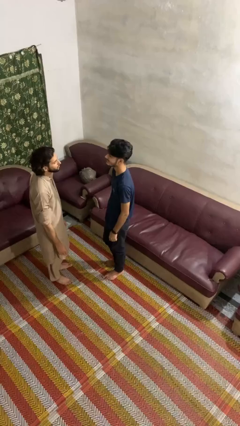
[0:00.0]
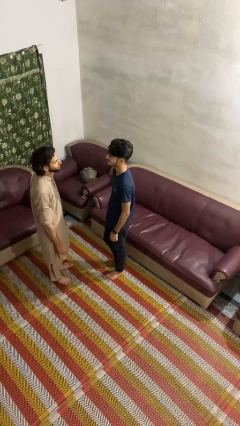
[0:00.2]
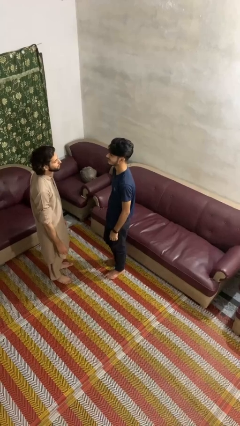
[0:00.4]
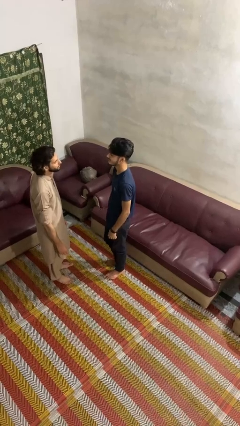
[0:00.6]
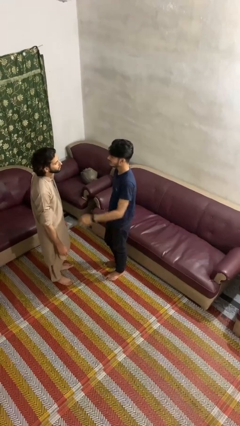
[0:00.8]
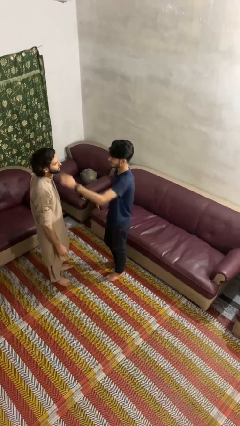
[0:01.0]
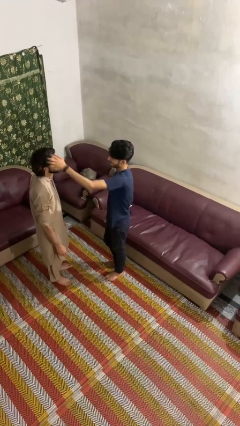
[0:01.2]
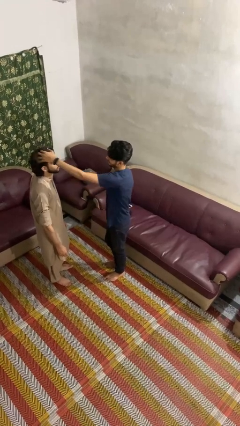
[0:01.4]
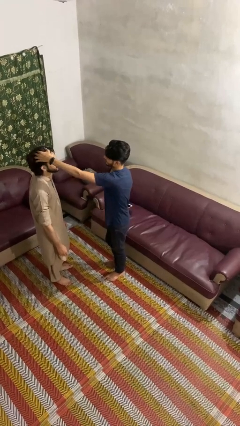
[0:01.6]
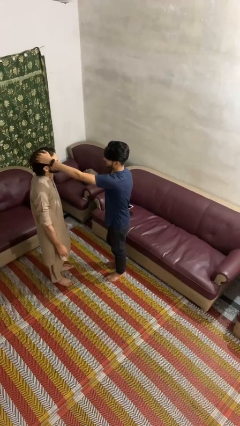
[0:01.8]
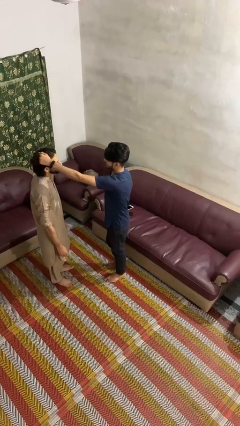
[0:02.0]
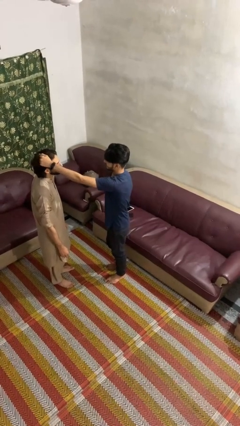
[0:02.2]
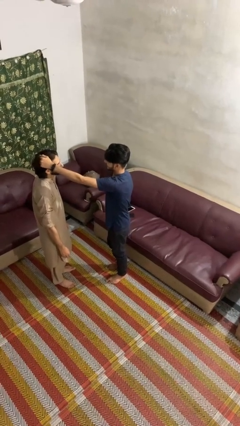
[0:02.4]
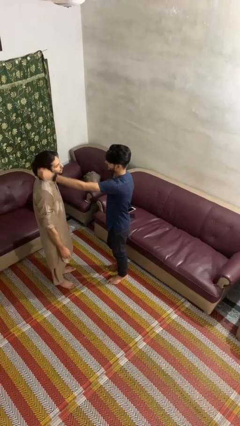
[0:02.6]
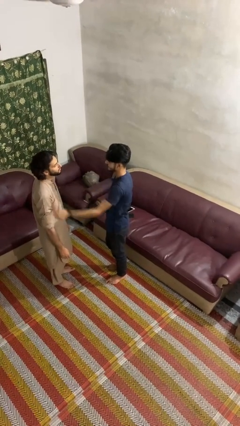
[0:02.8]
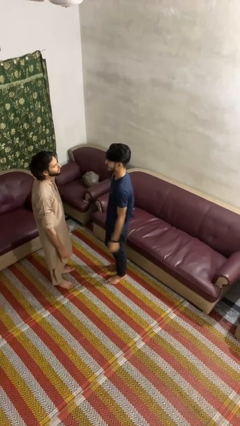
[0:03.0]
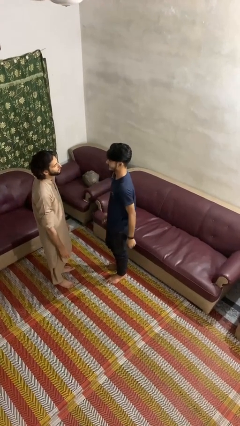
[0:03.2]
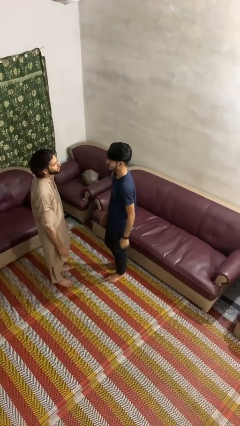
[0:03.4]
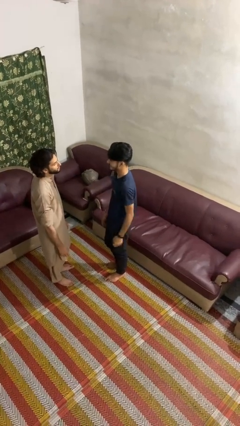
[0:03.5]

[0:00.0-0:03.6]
person grabs person by hair

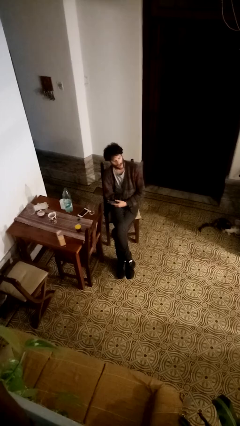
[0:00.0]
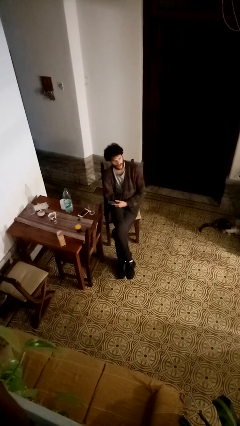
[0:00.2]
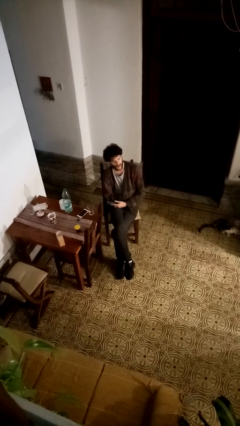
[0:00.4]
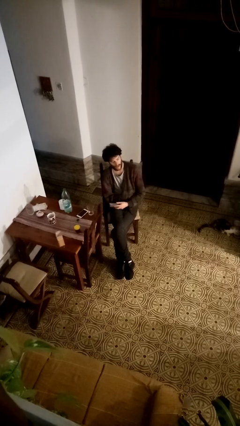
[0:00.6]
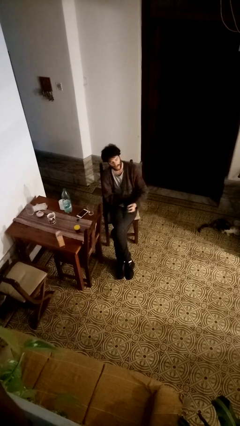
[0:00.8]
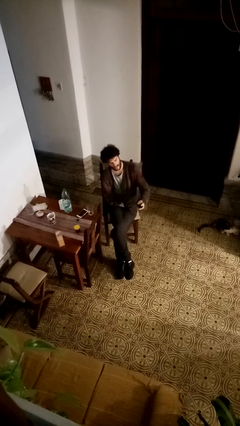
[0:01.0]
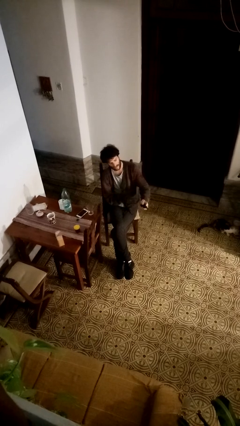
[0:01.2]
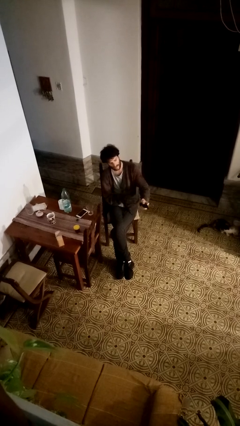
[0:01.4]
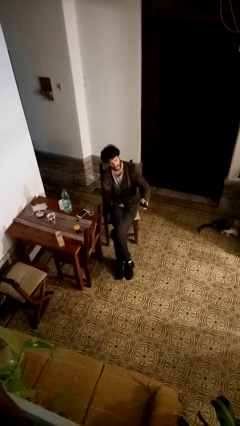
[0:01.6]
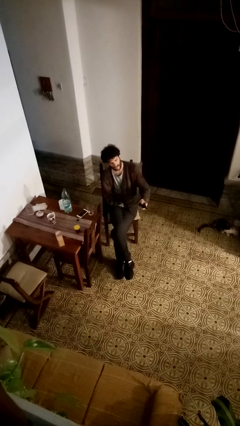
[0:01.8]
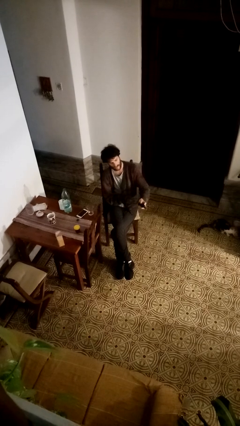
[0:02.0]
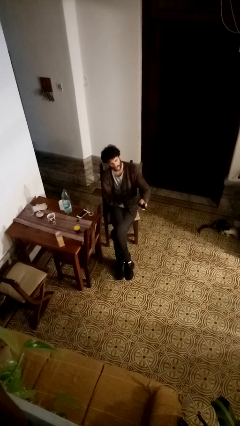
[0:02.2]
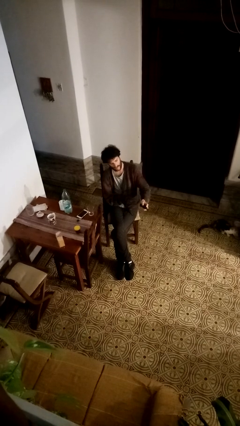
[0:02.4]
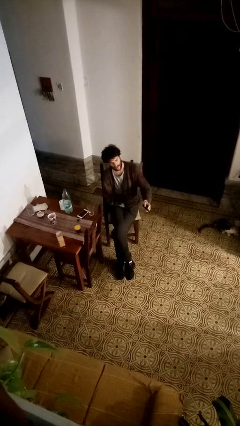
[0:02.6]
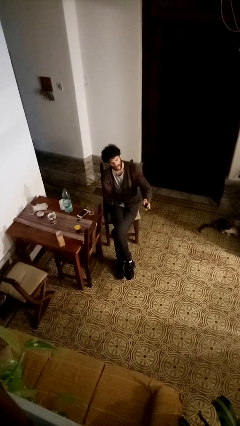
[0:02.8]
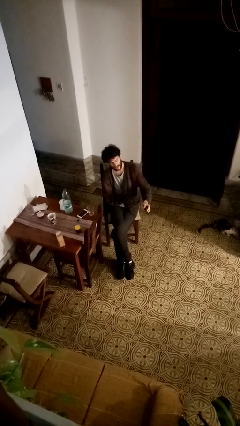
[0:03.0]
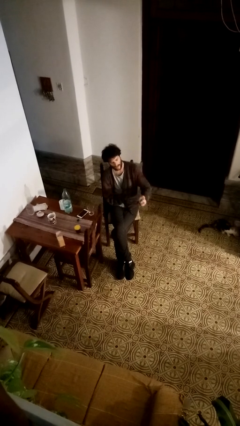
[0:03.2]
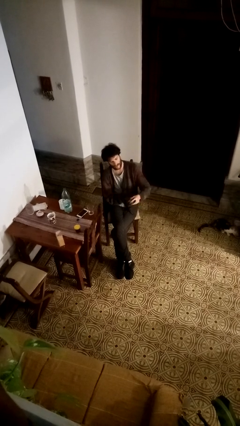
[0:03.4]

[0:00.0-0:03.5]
person uses television remote

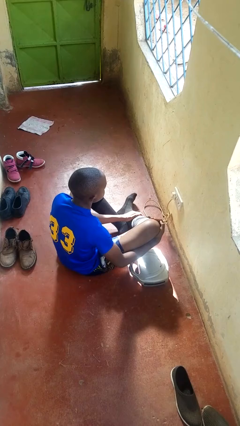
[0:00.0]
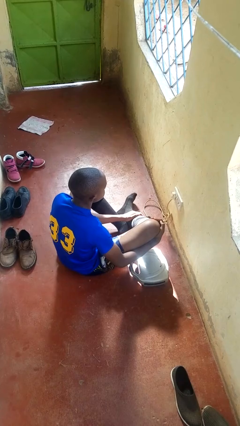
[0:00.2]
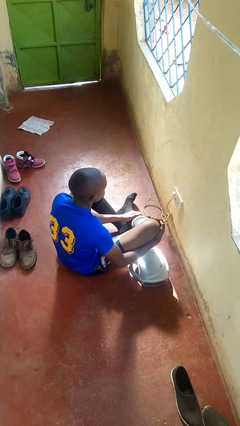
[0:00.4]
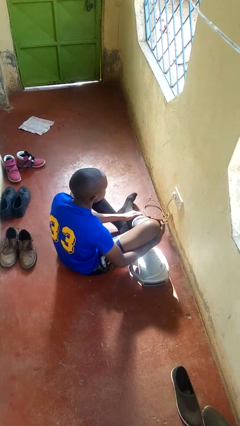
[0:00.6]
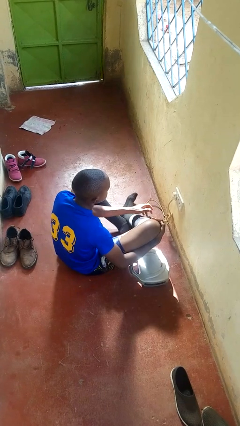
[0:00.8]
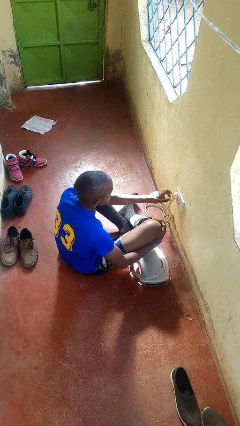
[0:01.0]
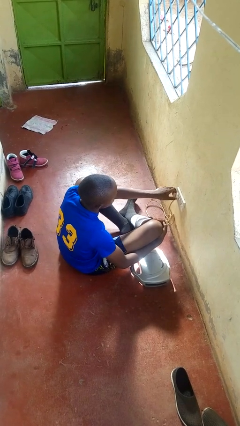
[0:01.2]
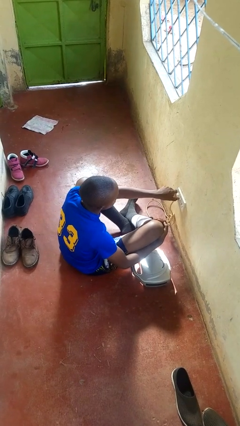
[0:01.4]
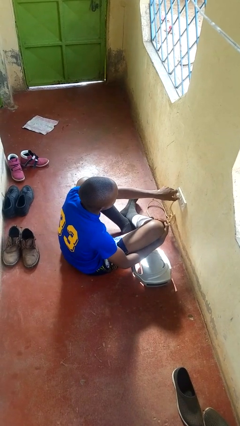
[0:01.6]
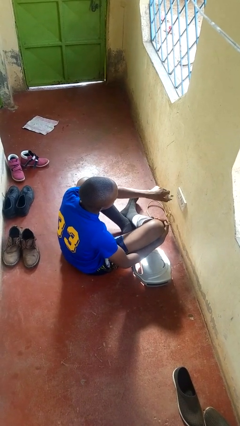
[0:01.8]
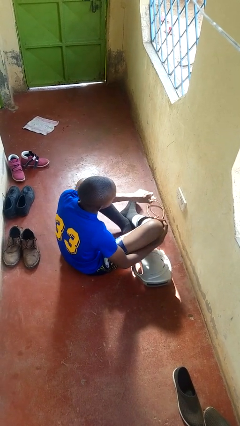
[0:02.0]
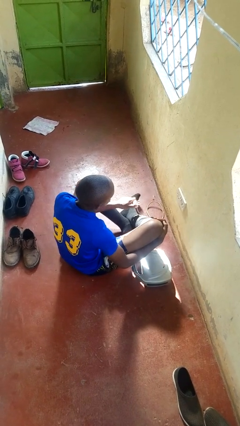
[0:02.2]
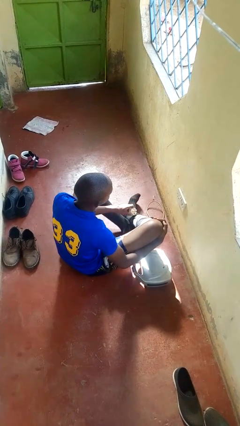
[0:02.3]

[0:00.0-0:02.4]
person unplugs from electrical socket

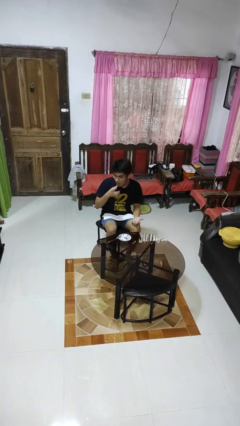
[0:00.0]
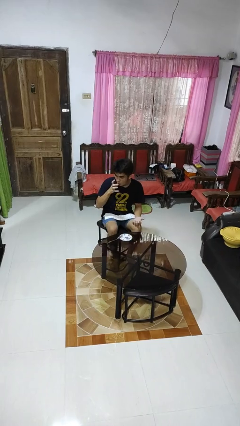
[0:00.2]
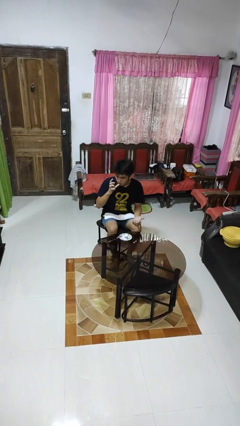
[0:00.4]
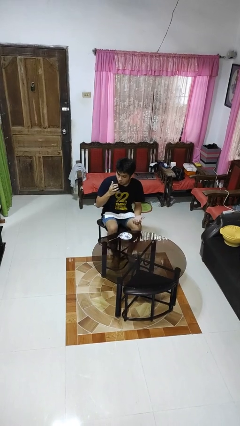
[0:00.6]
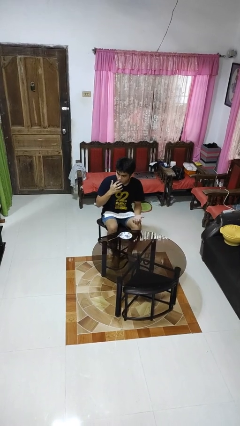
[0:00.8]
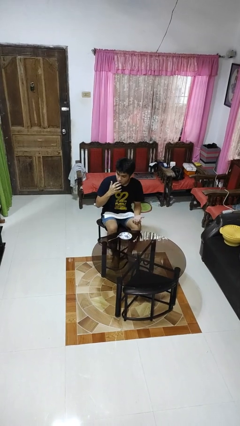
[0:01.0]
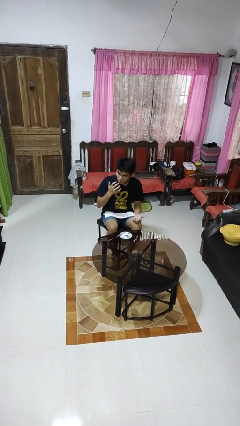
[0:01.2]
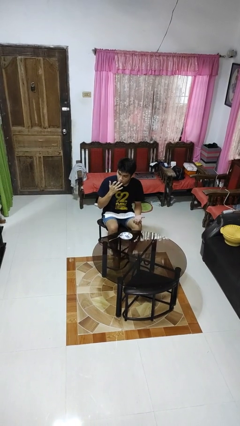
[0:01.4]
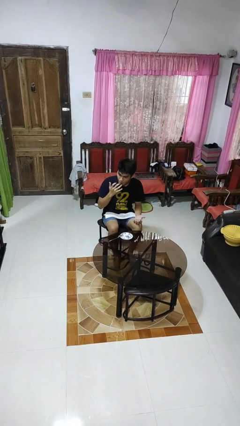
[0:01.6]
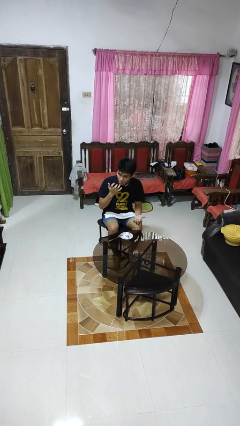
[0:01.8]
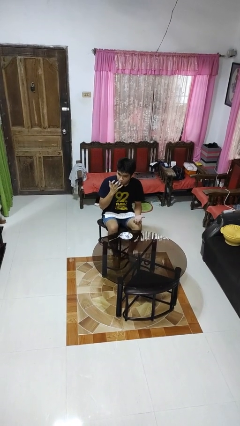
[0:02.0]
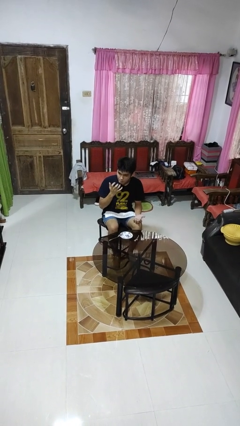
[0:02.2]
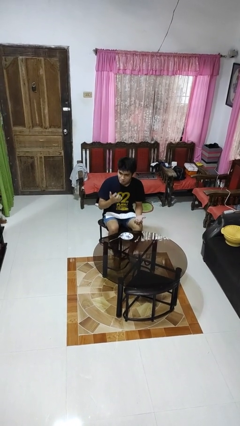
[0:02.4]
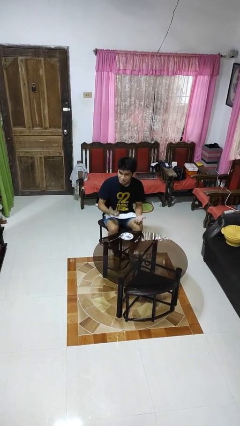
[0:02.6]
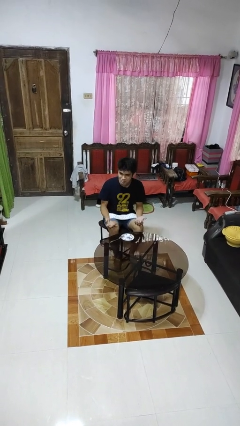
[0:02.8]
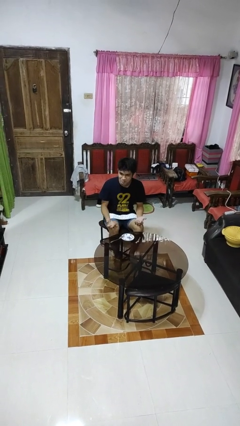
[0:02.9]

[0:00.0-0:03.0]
person licks fingers

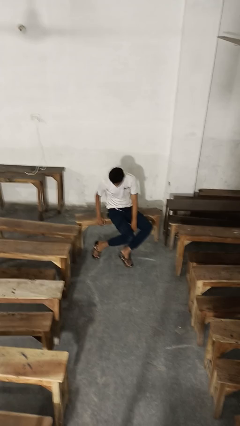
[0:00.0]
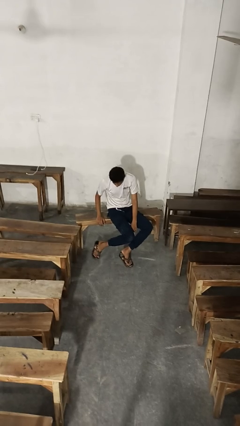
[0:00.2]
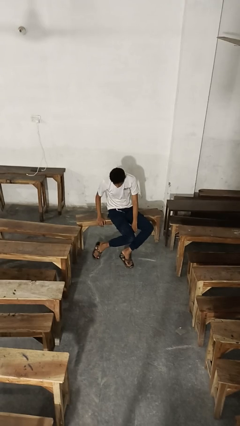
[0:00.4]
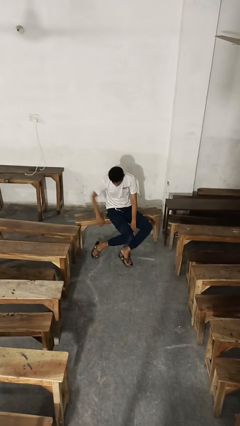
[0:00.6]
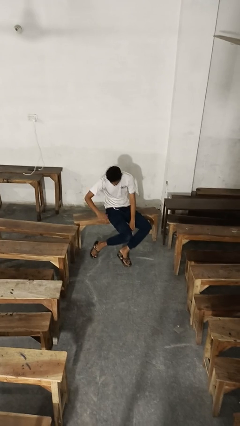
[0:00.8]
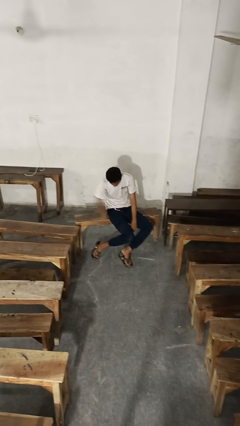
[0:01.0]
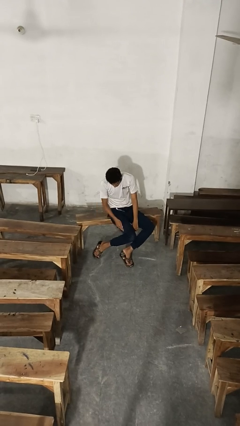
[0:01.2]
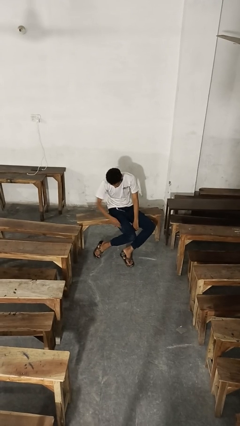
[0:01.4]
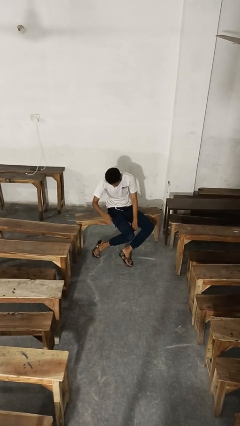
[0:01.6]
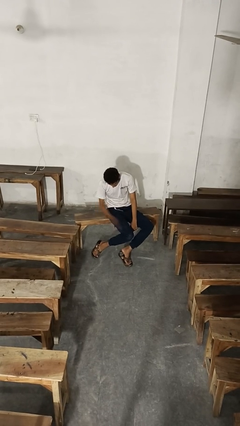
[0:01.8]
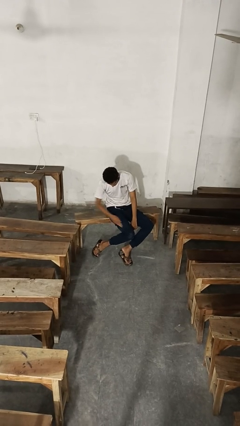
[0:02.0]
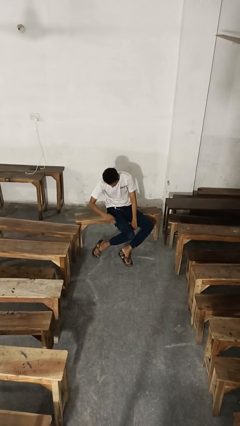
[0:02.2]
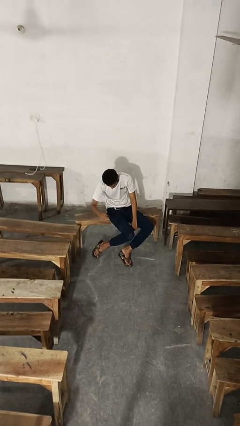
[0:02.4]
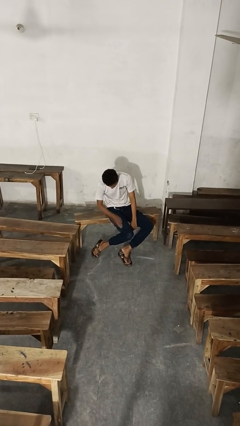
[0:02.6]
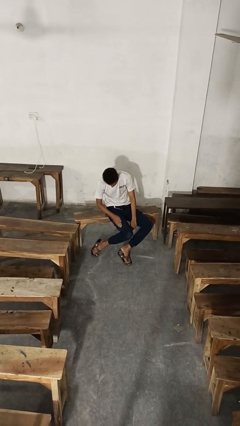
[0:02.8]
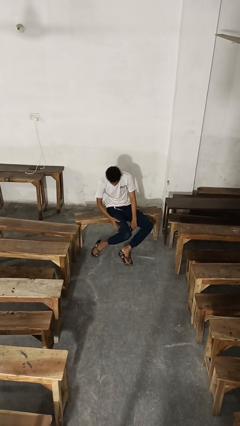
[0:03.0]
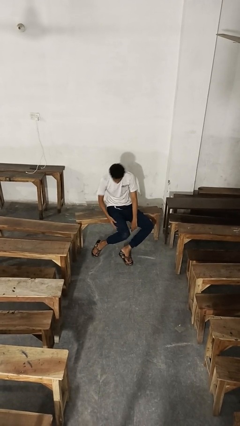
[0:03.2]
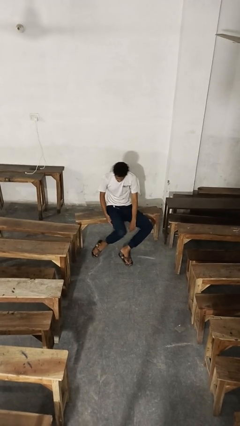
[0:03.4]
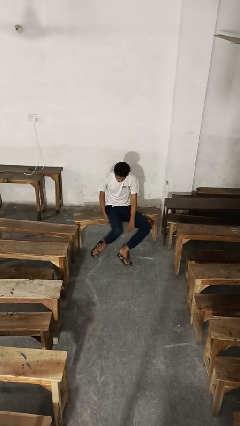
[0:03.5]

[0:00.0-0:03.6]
person slaps hands on thighs

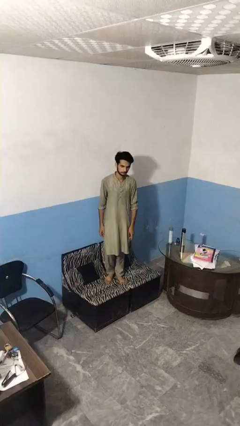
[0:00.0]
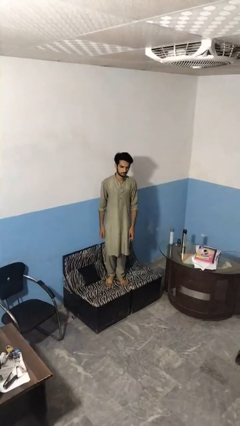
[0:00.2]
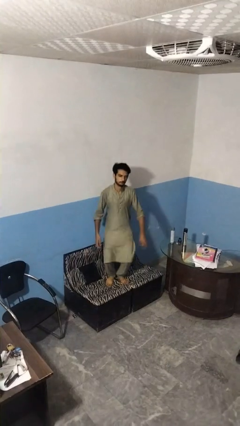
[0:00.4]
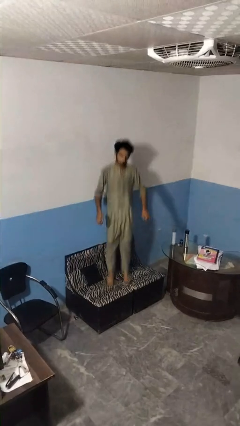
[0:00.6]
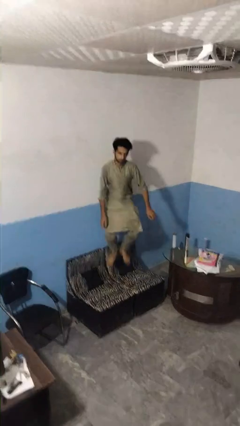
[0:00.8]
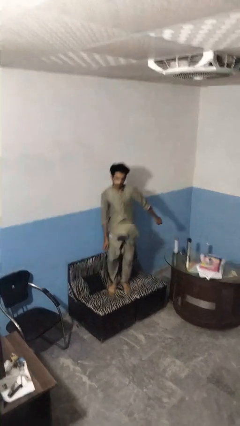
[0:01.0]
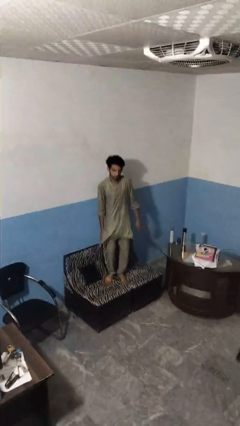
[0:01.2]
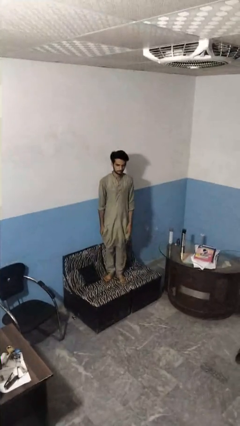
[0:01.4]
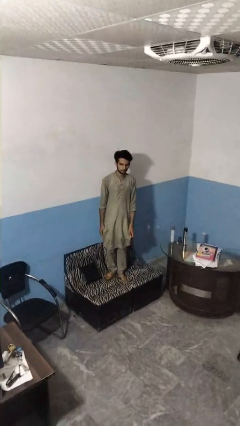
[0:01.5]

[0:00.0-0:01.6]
person jumps on couch

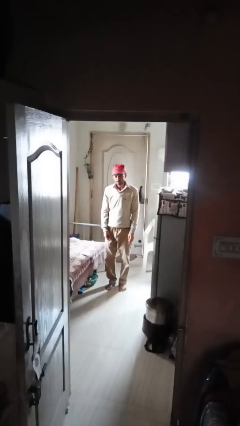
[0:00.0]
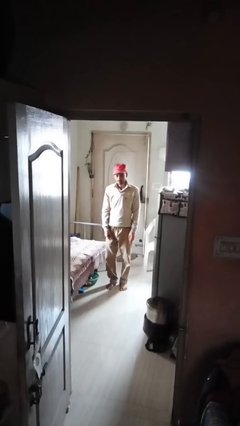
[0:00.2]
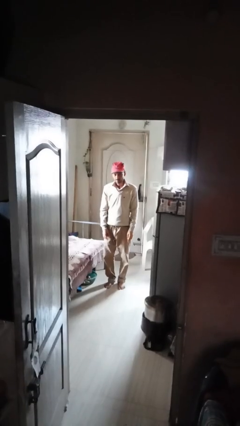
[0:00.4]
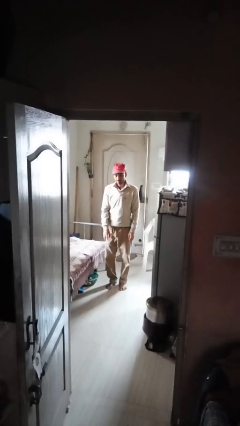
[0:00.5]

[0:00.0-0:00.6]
person gestures peace
